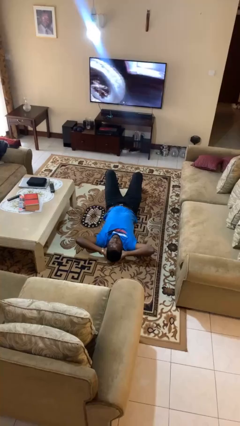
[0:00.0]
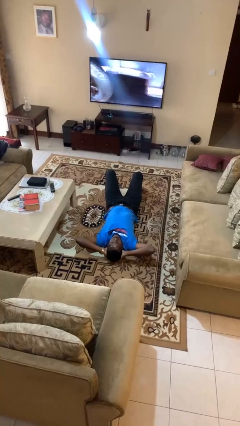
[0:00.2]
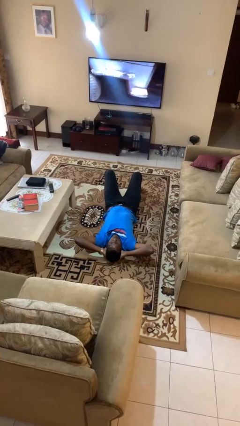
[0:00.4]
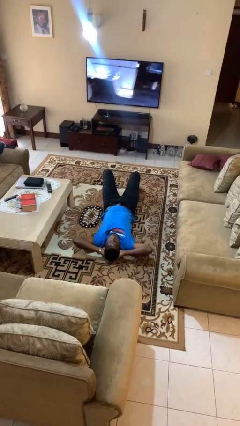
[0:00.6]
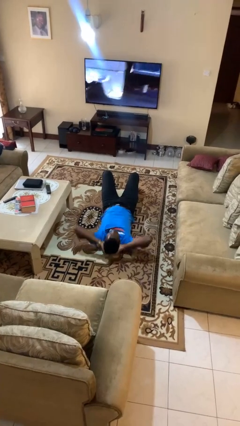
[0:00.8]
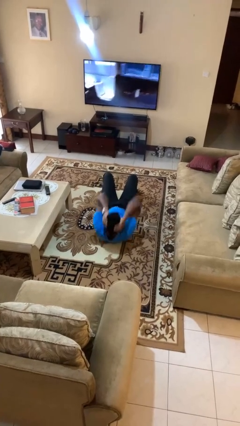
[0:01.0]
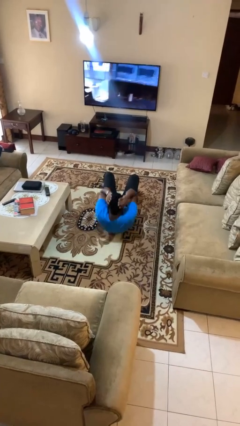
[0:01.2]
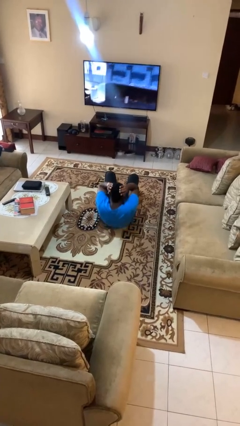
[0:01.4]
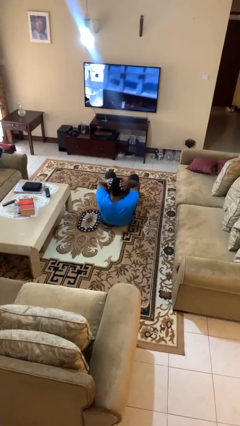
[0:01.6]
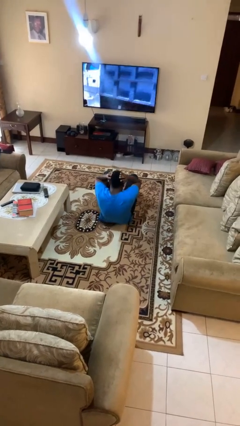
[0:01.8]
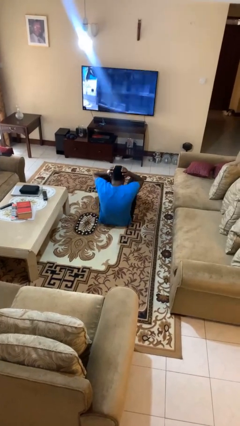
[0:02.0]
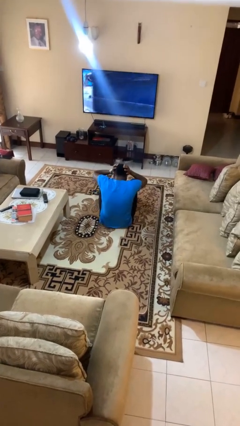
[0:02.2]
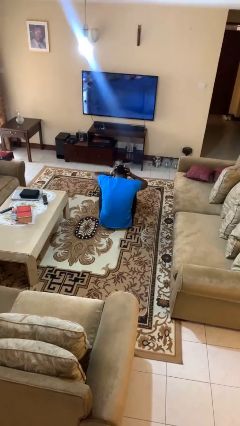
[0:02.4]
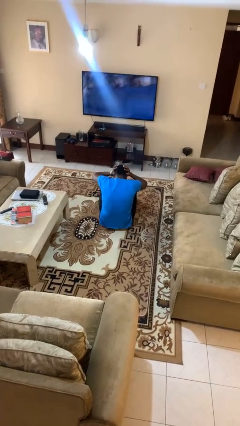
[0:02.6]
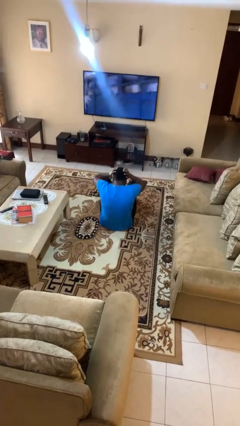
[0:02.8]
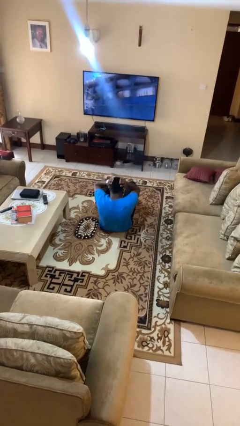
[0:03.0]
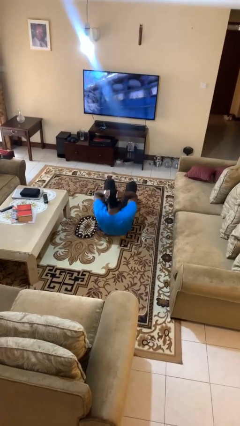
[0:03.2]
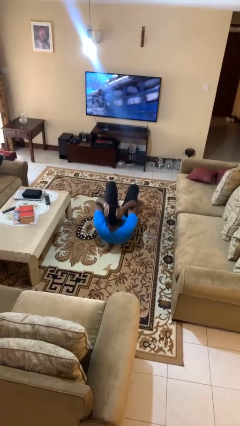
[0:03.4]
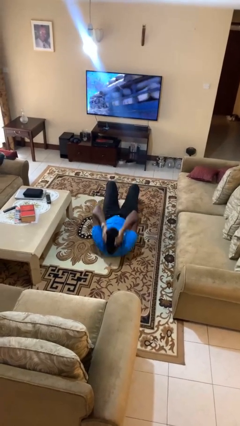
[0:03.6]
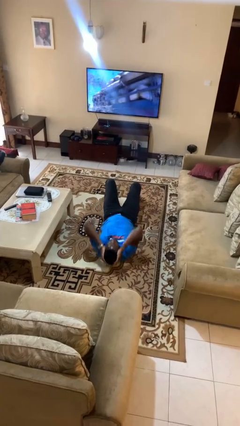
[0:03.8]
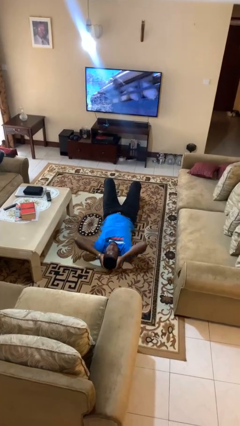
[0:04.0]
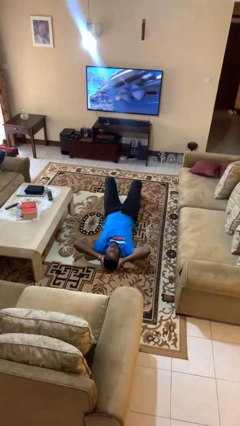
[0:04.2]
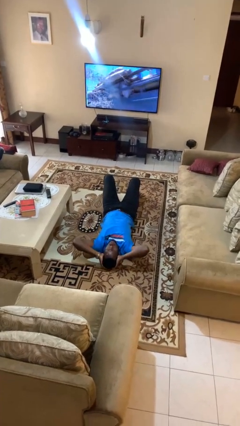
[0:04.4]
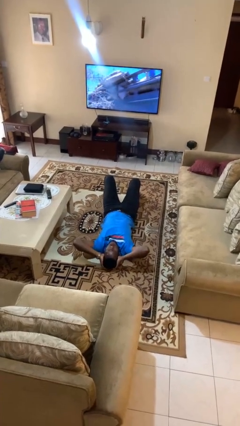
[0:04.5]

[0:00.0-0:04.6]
person exercises with situp

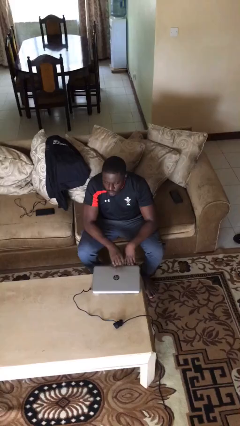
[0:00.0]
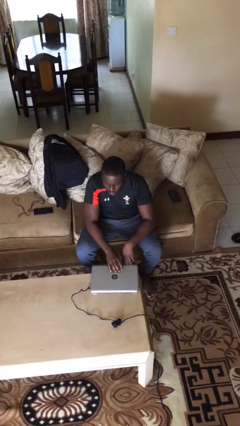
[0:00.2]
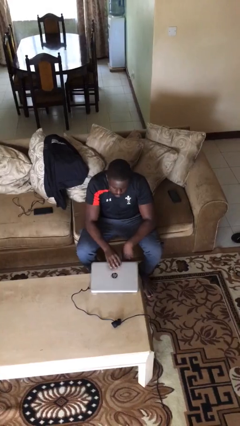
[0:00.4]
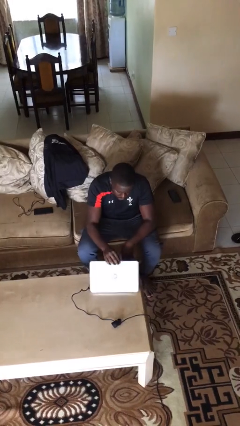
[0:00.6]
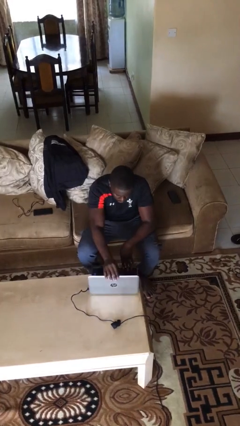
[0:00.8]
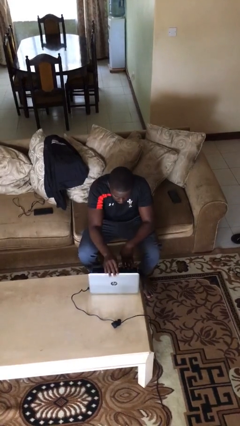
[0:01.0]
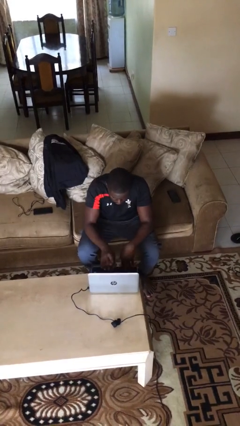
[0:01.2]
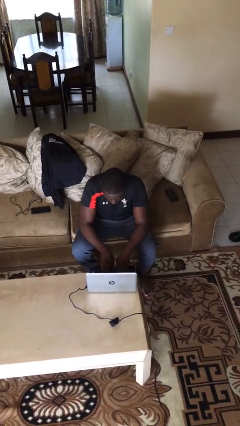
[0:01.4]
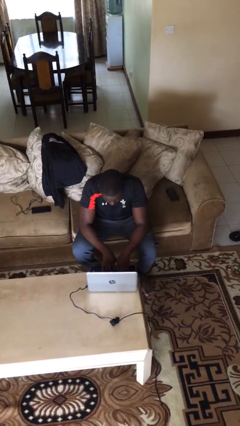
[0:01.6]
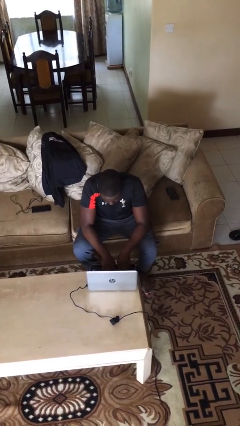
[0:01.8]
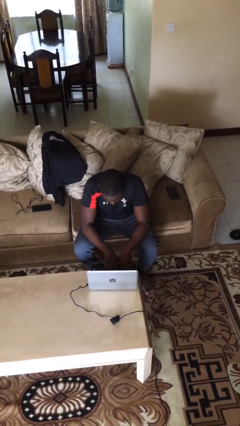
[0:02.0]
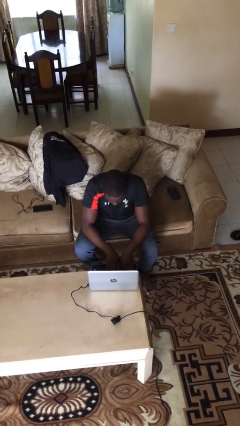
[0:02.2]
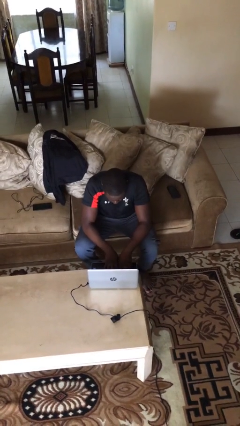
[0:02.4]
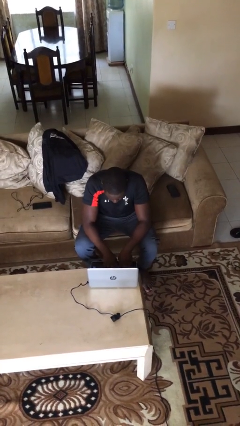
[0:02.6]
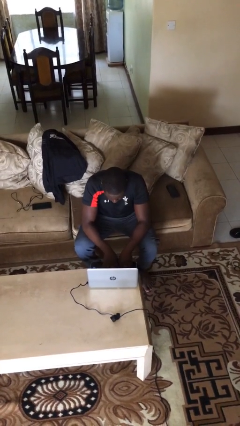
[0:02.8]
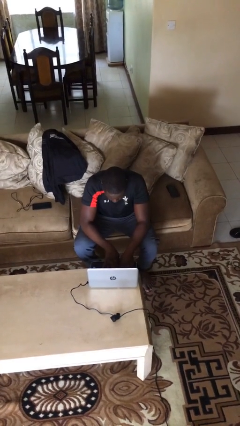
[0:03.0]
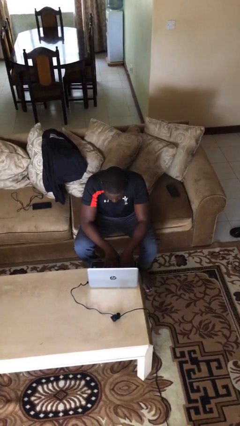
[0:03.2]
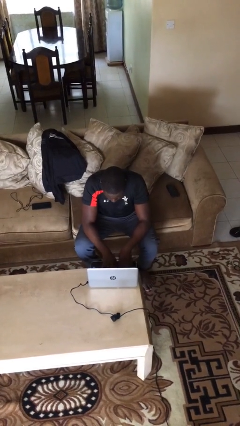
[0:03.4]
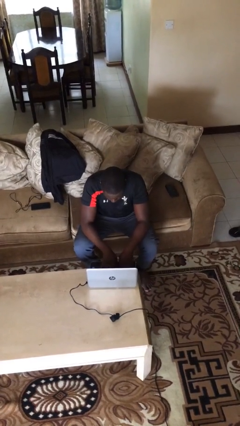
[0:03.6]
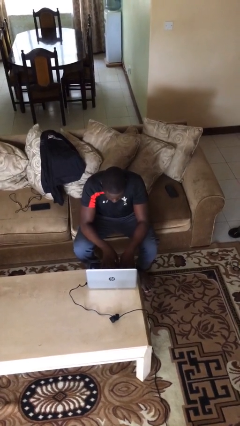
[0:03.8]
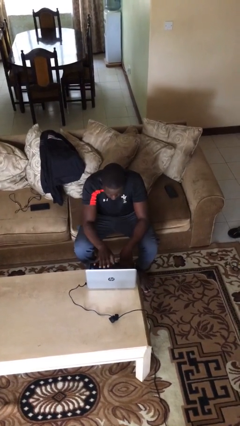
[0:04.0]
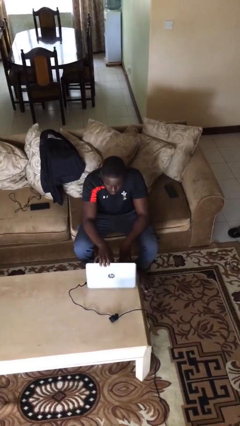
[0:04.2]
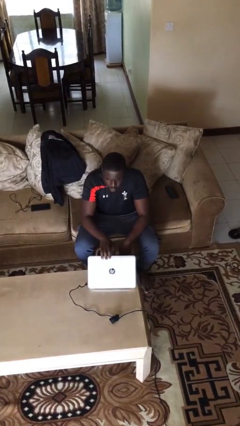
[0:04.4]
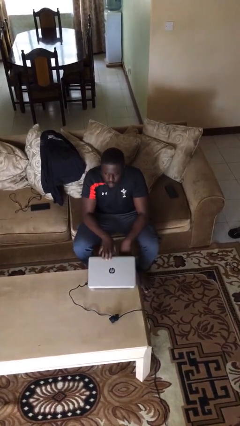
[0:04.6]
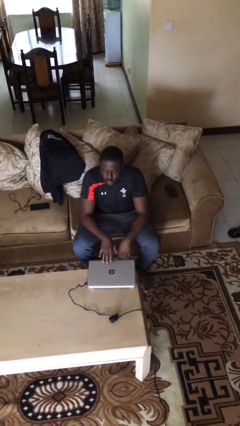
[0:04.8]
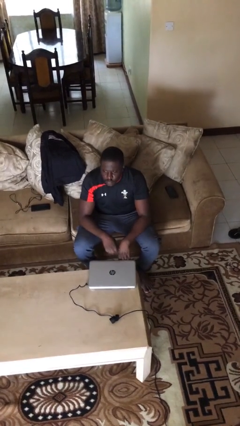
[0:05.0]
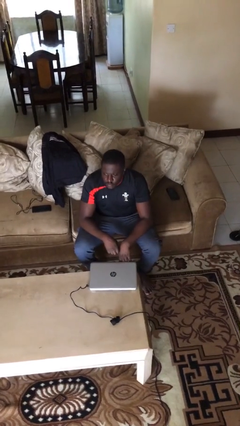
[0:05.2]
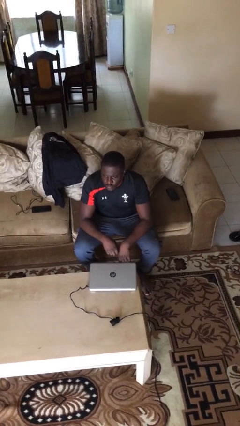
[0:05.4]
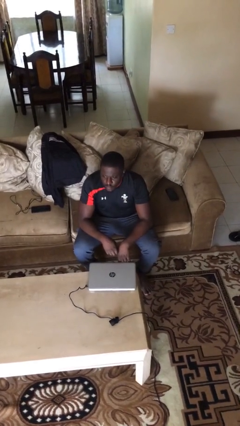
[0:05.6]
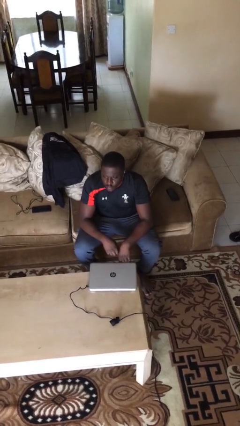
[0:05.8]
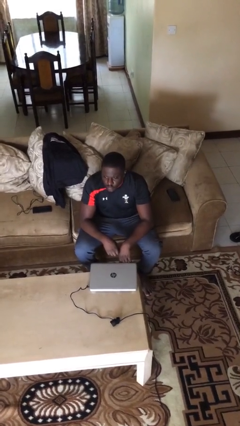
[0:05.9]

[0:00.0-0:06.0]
person interacts with laptop

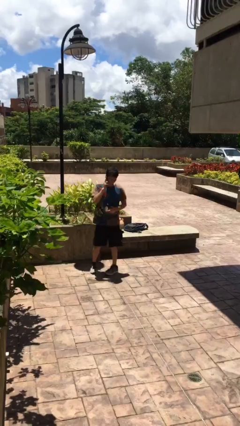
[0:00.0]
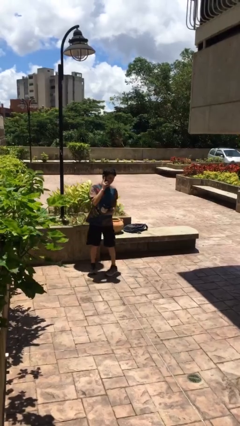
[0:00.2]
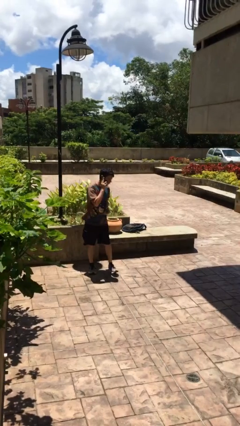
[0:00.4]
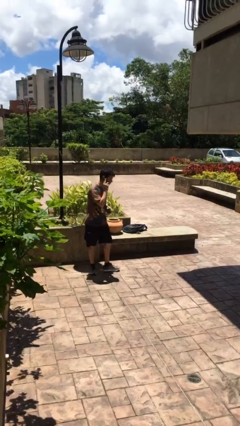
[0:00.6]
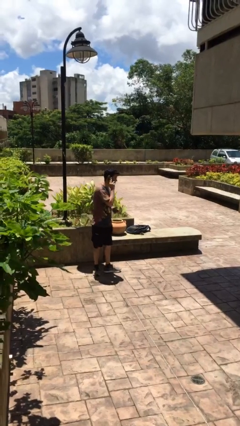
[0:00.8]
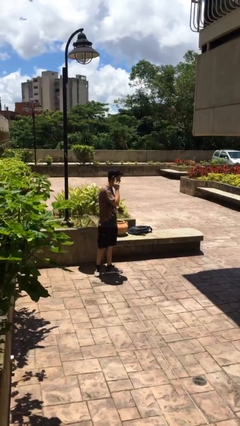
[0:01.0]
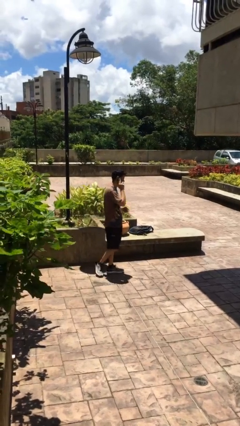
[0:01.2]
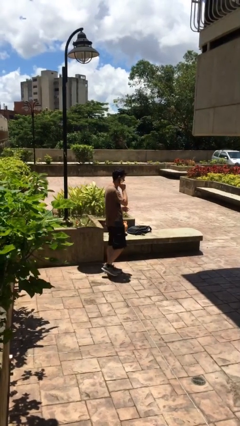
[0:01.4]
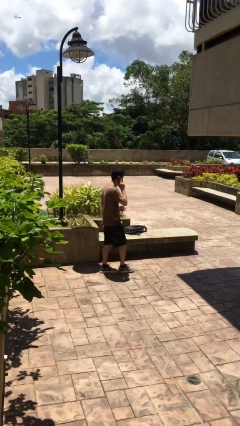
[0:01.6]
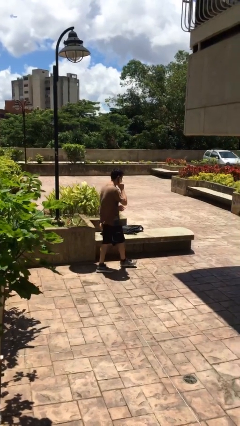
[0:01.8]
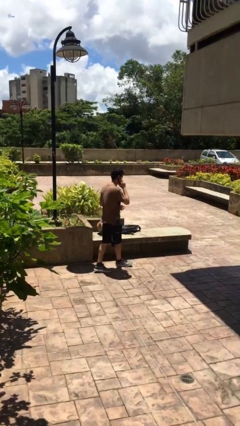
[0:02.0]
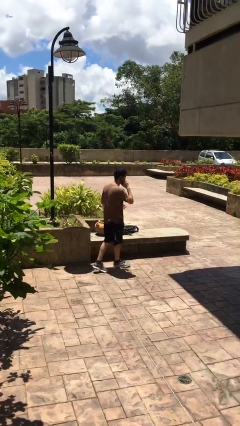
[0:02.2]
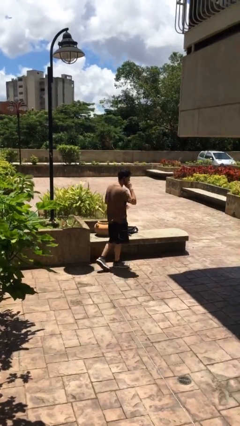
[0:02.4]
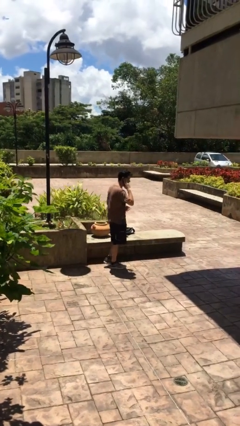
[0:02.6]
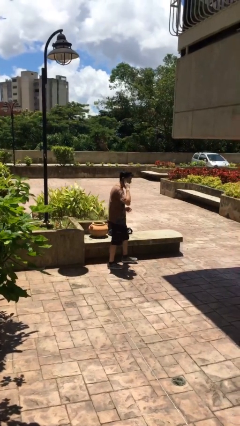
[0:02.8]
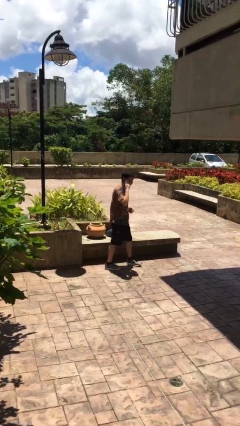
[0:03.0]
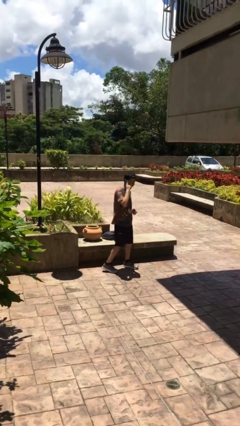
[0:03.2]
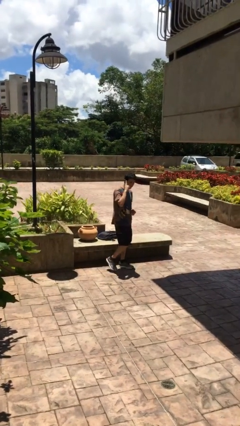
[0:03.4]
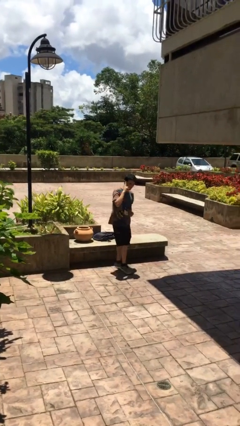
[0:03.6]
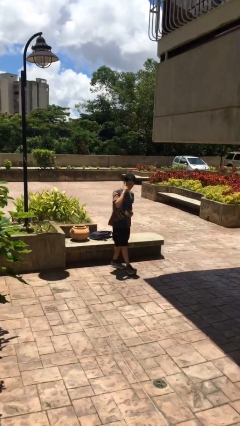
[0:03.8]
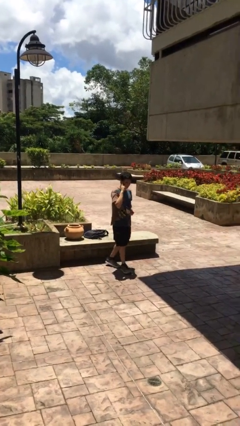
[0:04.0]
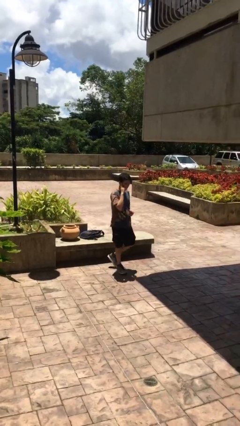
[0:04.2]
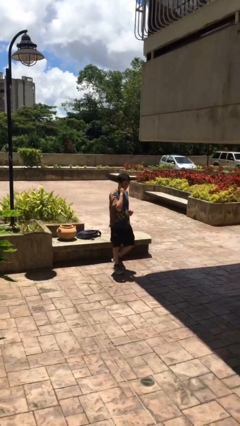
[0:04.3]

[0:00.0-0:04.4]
person talks on phone

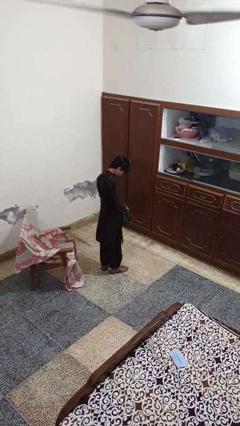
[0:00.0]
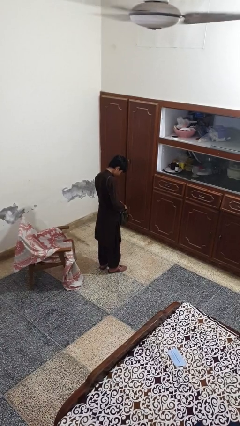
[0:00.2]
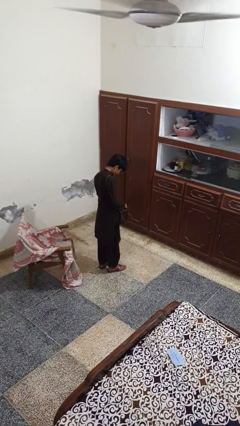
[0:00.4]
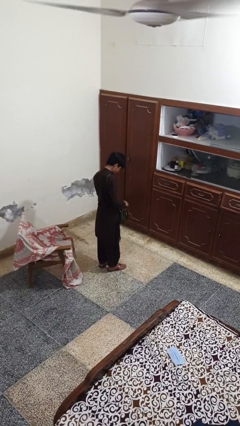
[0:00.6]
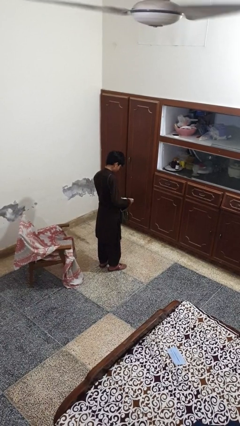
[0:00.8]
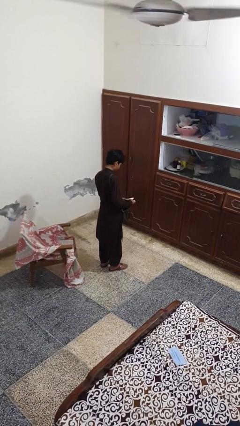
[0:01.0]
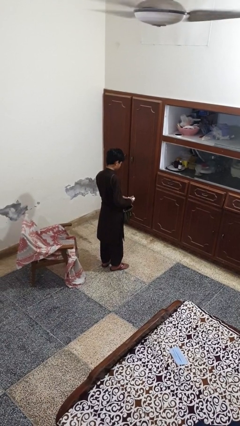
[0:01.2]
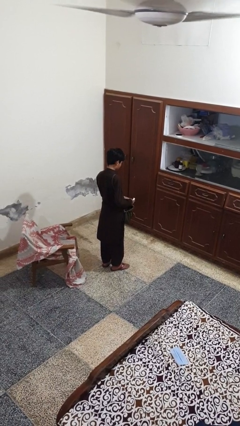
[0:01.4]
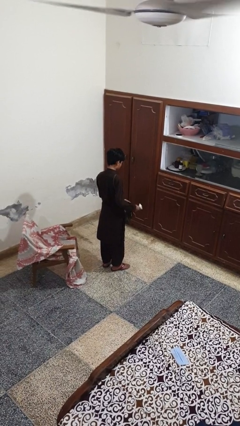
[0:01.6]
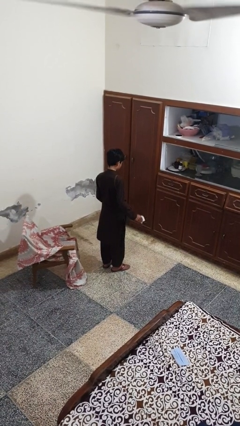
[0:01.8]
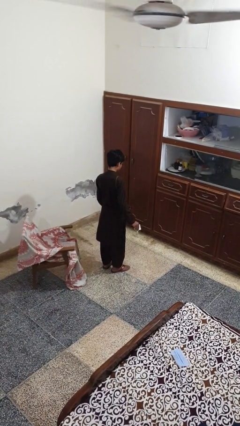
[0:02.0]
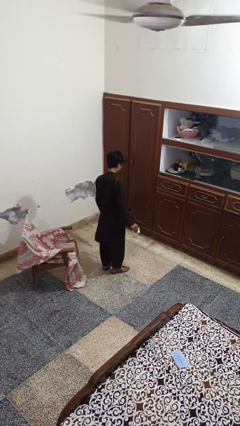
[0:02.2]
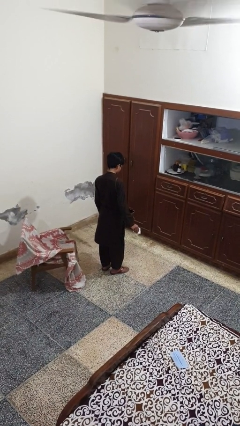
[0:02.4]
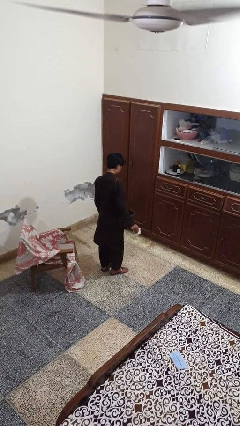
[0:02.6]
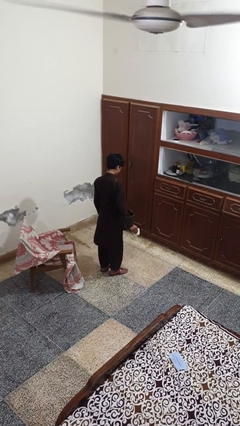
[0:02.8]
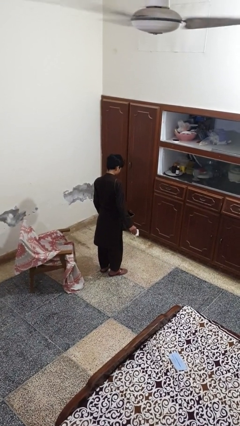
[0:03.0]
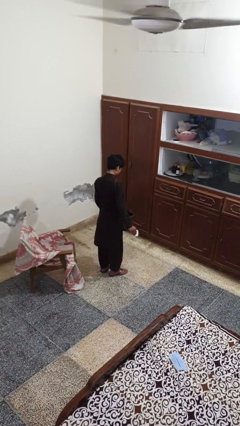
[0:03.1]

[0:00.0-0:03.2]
person takes object from purse
